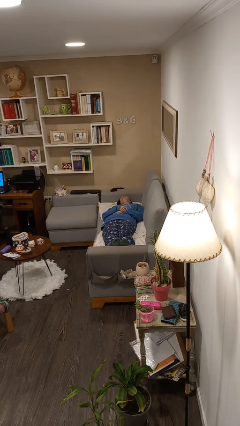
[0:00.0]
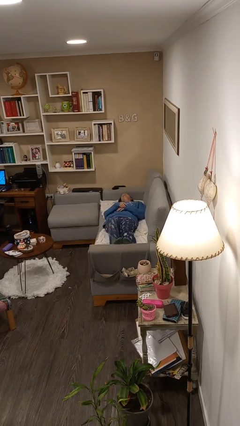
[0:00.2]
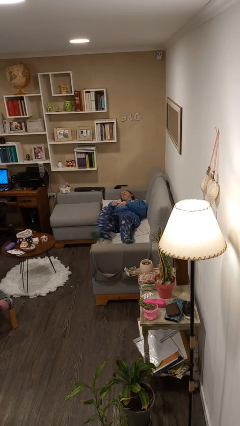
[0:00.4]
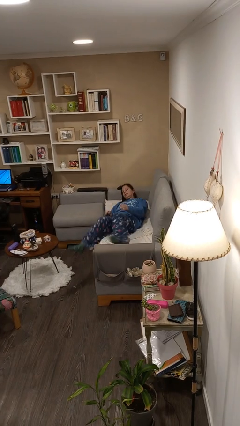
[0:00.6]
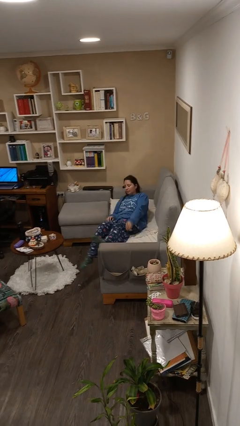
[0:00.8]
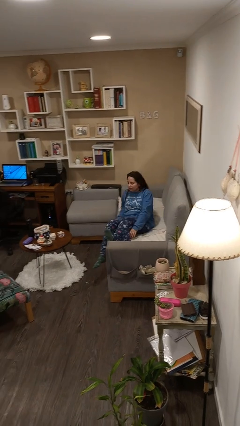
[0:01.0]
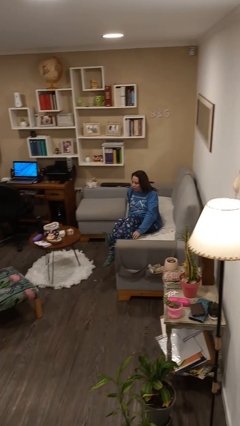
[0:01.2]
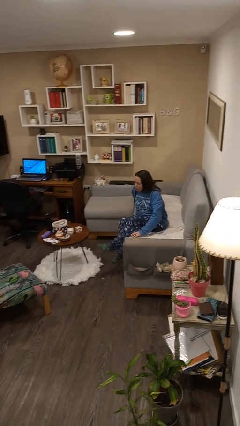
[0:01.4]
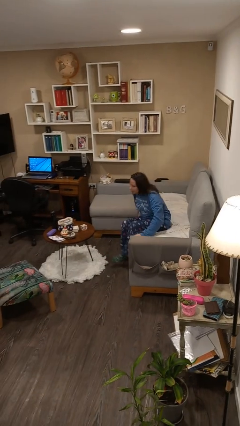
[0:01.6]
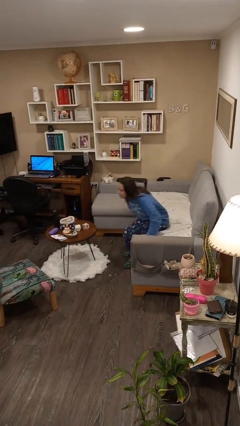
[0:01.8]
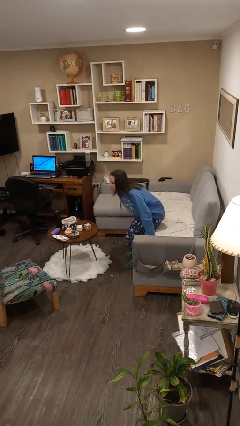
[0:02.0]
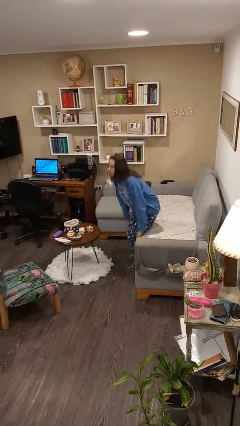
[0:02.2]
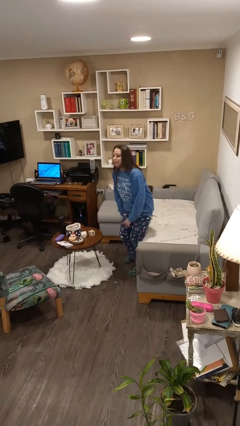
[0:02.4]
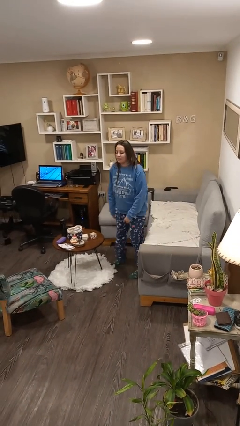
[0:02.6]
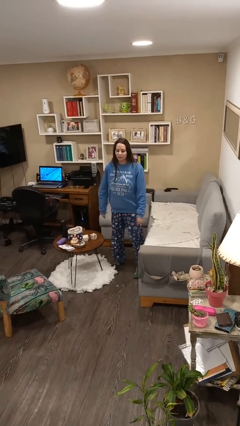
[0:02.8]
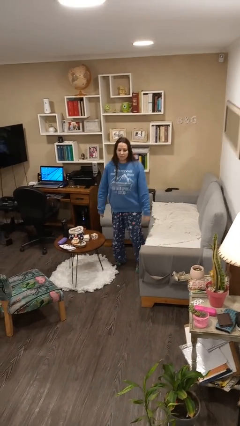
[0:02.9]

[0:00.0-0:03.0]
person stands up

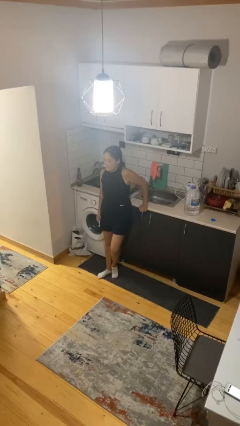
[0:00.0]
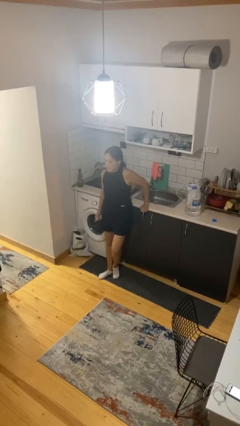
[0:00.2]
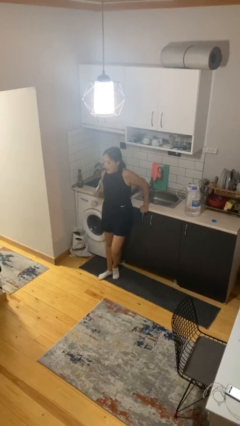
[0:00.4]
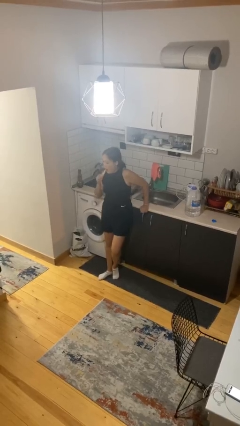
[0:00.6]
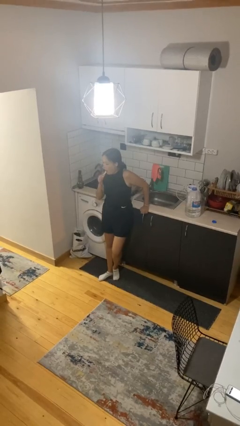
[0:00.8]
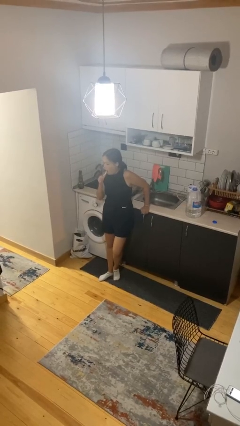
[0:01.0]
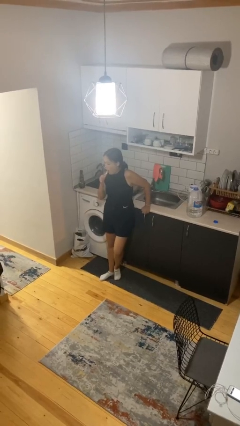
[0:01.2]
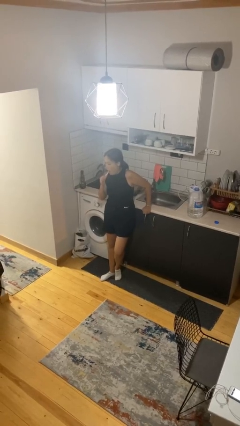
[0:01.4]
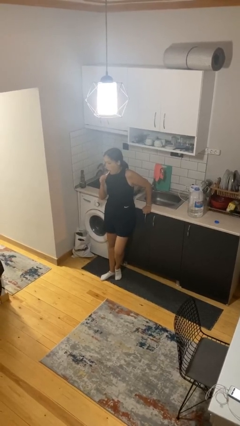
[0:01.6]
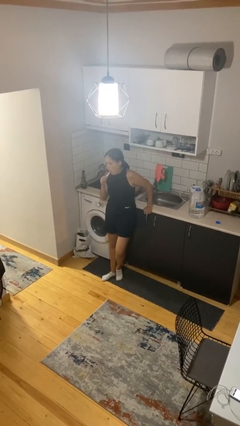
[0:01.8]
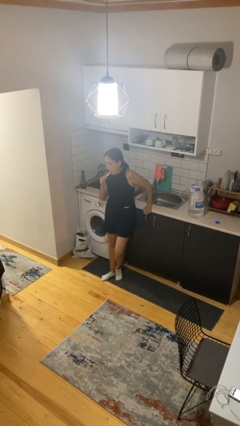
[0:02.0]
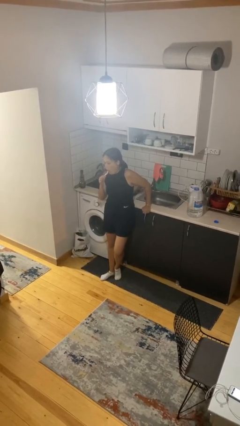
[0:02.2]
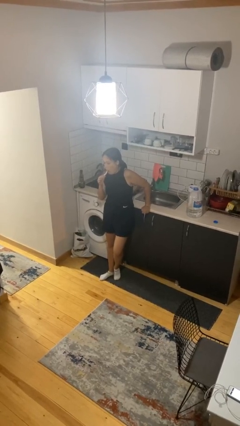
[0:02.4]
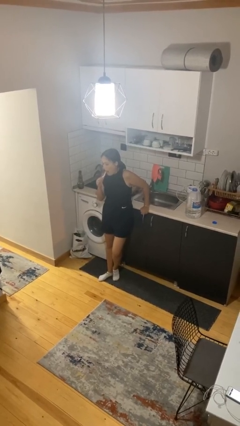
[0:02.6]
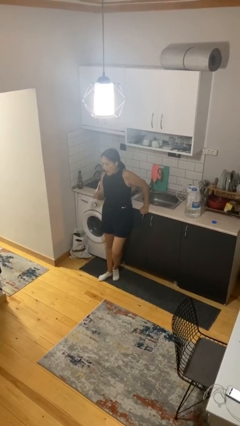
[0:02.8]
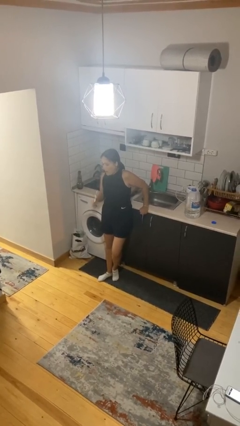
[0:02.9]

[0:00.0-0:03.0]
person brushes teeth

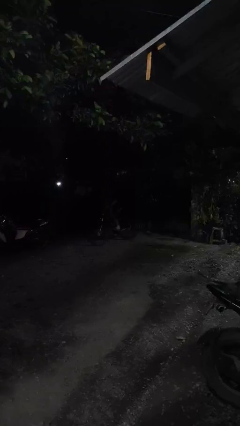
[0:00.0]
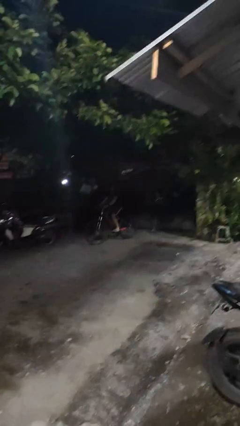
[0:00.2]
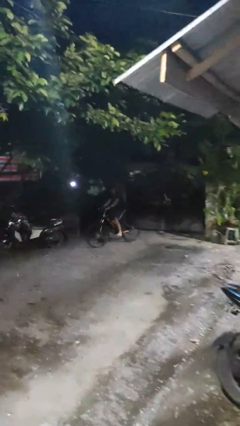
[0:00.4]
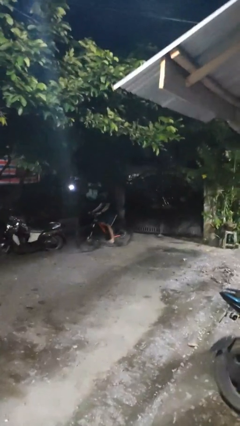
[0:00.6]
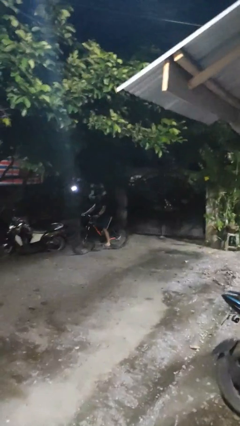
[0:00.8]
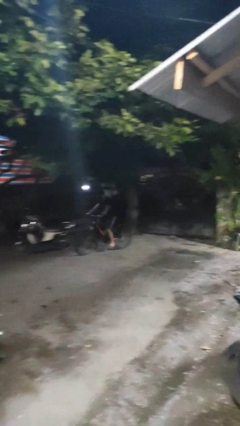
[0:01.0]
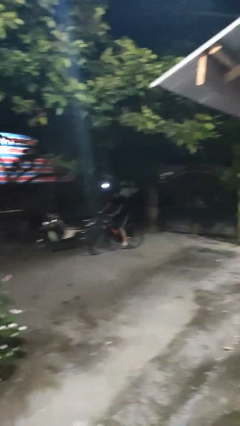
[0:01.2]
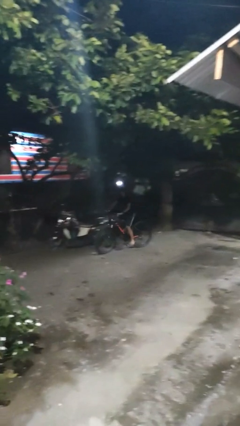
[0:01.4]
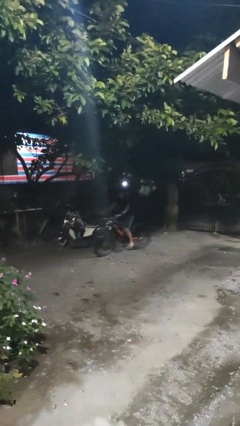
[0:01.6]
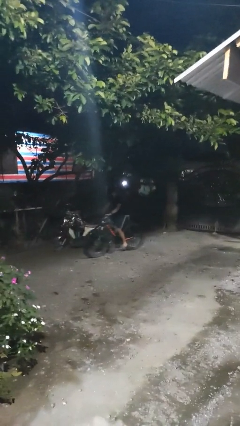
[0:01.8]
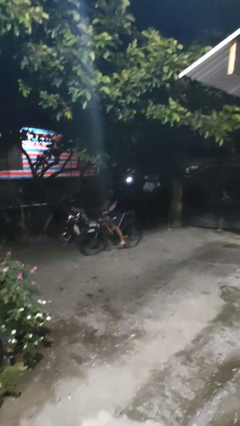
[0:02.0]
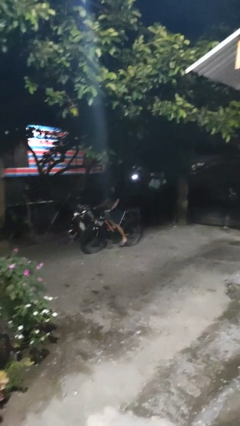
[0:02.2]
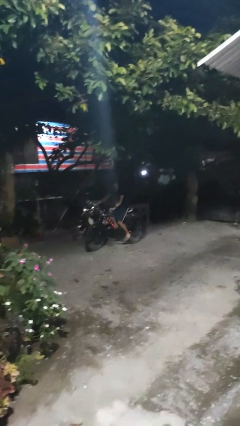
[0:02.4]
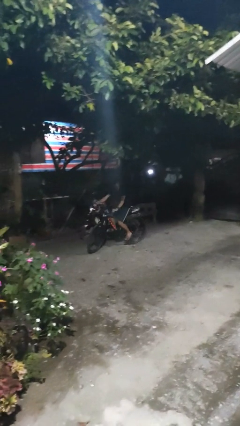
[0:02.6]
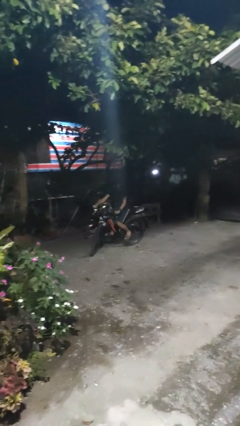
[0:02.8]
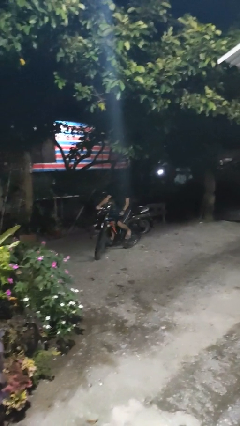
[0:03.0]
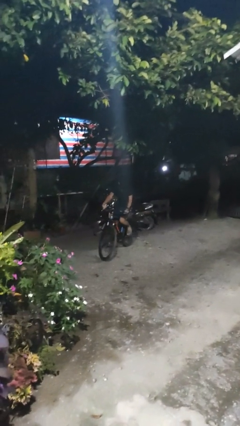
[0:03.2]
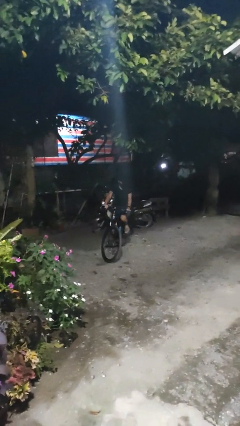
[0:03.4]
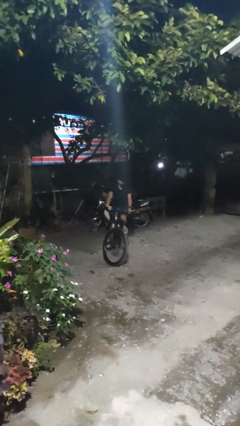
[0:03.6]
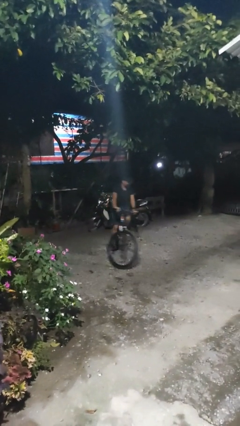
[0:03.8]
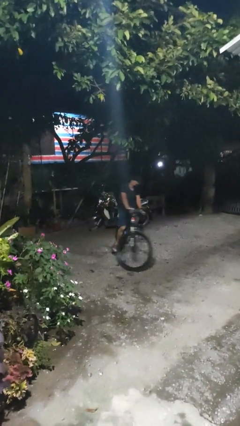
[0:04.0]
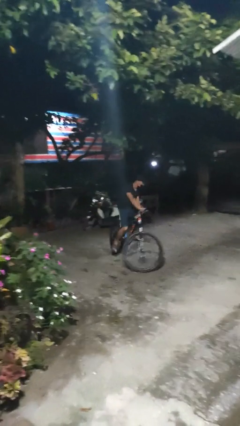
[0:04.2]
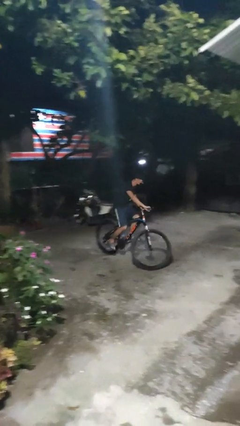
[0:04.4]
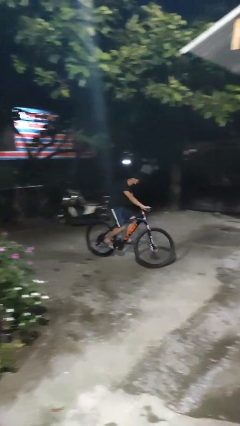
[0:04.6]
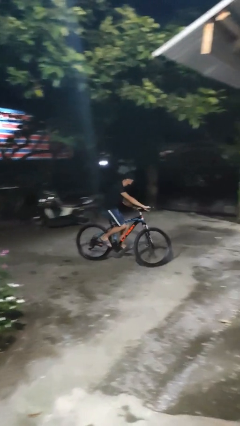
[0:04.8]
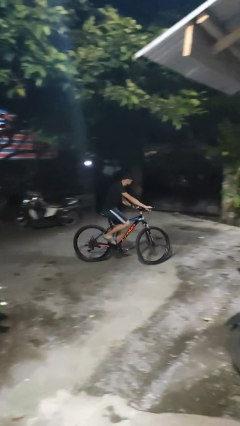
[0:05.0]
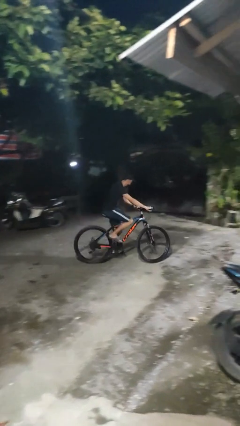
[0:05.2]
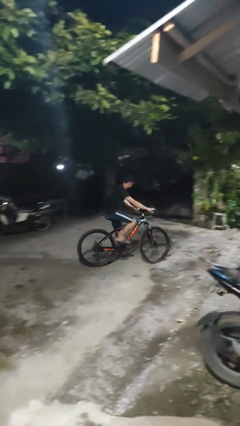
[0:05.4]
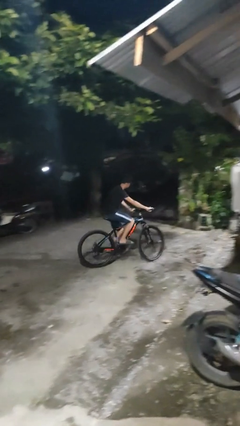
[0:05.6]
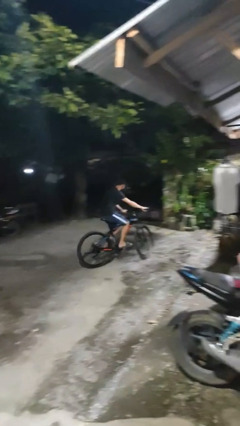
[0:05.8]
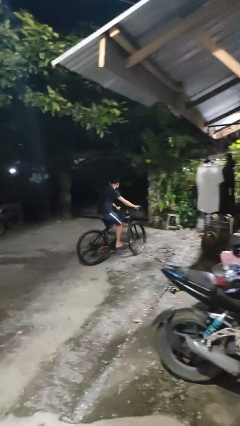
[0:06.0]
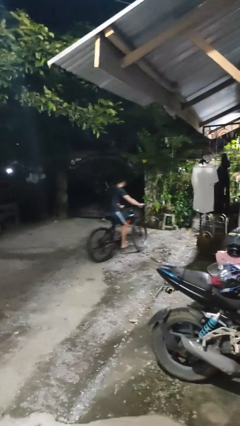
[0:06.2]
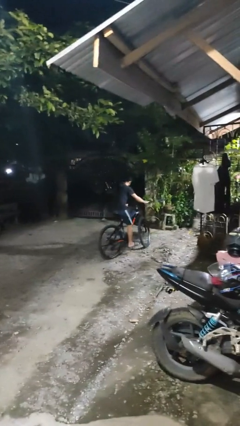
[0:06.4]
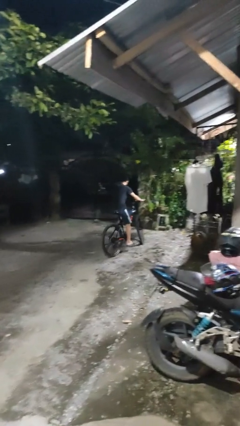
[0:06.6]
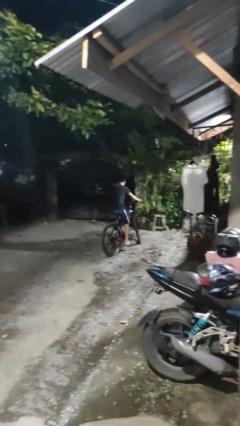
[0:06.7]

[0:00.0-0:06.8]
person rides bicycle

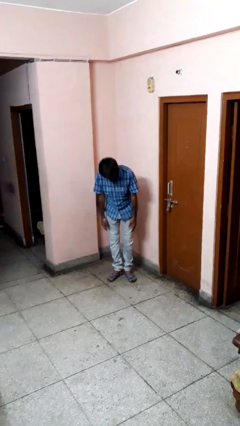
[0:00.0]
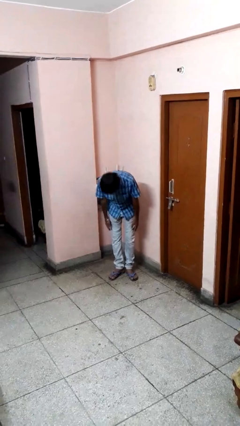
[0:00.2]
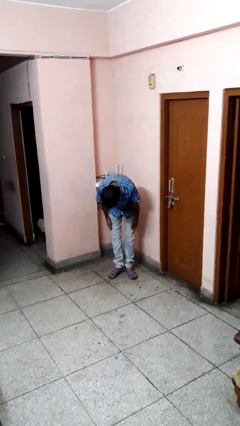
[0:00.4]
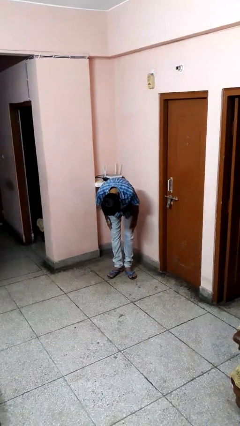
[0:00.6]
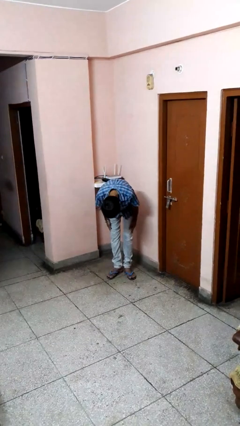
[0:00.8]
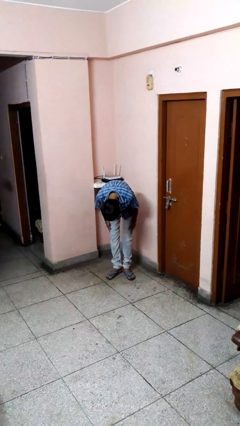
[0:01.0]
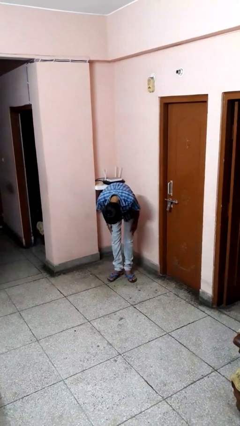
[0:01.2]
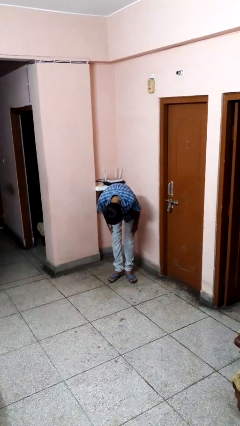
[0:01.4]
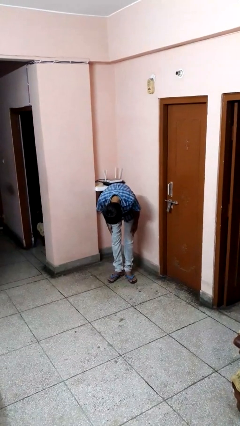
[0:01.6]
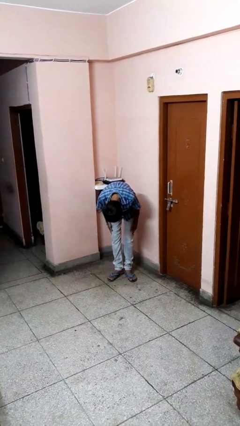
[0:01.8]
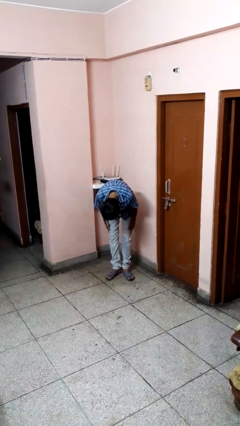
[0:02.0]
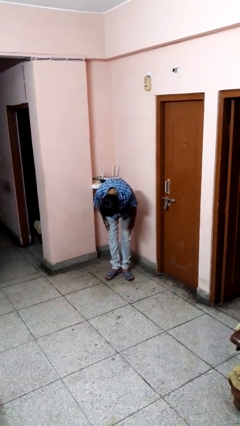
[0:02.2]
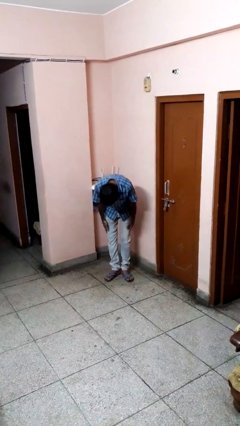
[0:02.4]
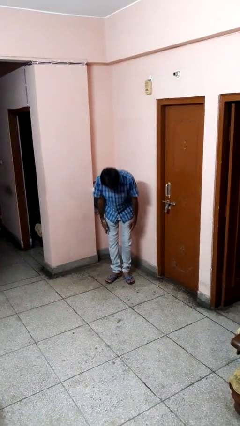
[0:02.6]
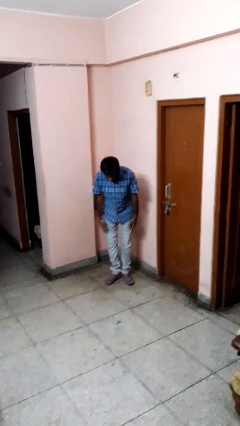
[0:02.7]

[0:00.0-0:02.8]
person bows

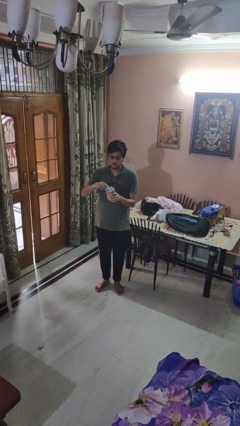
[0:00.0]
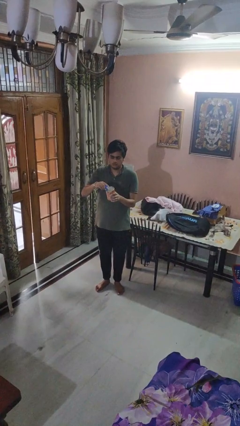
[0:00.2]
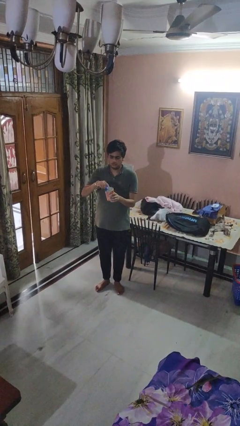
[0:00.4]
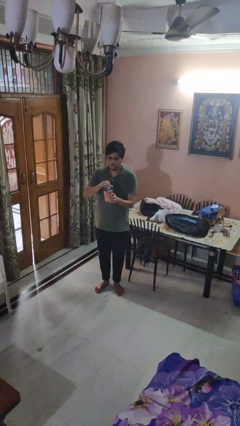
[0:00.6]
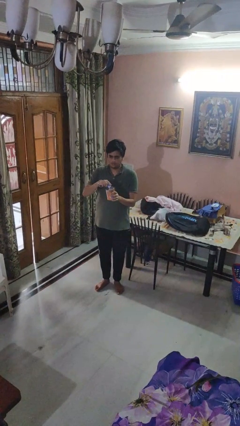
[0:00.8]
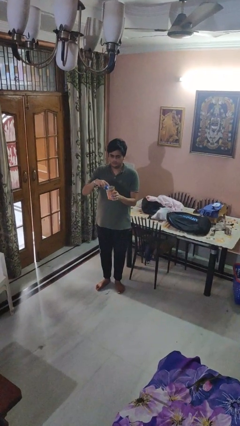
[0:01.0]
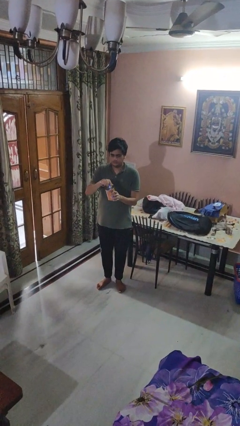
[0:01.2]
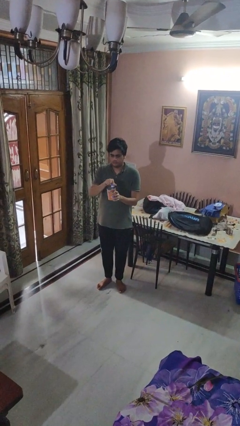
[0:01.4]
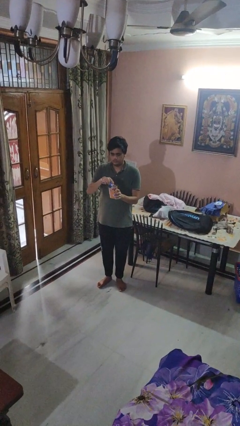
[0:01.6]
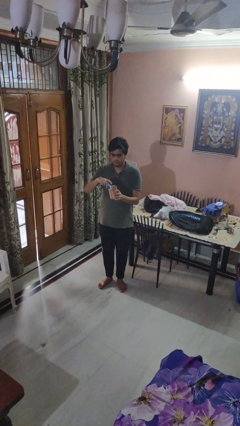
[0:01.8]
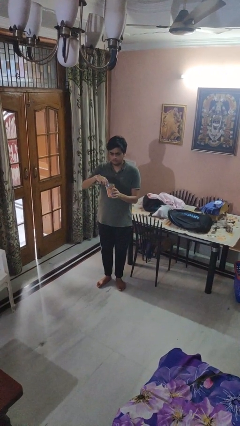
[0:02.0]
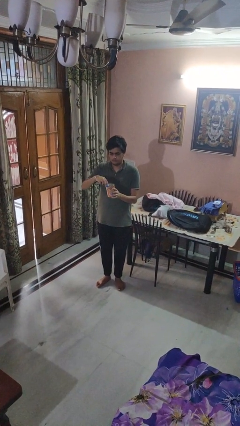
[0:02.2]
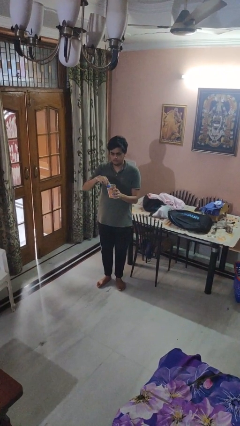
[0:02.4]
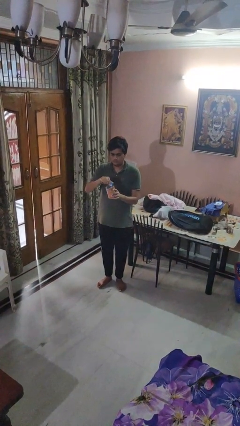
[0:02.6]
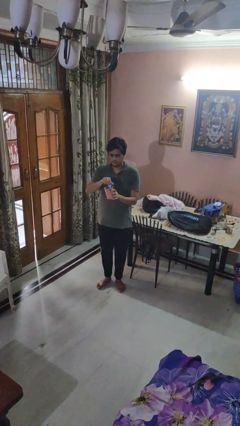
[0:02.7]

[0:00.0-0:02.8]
person opens can with can opener
